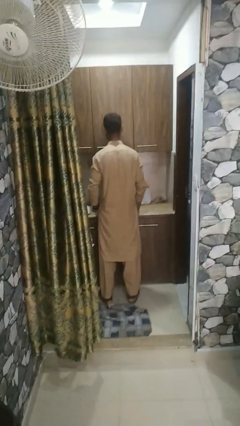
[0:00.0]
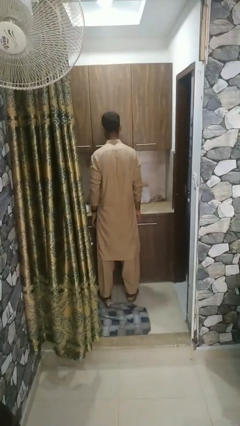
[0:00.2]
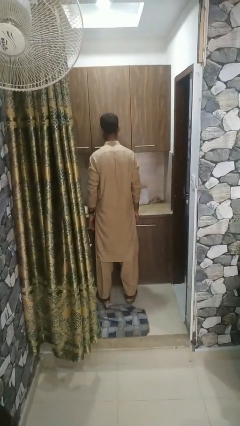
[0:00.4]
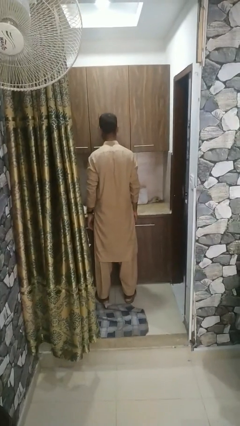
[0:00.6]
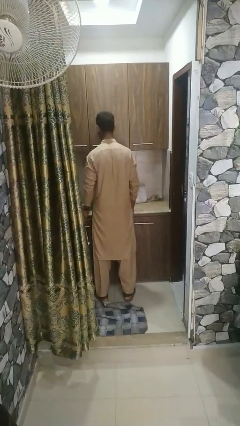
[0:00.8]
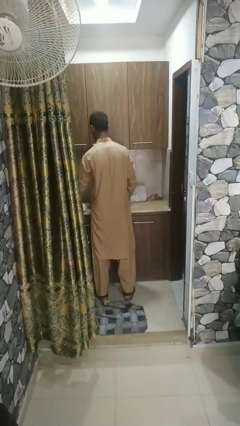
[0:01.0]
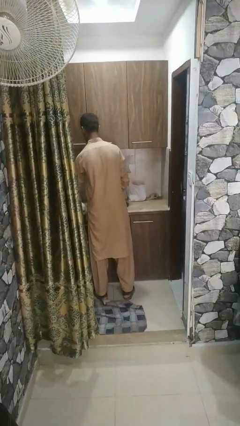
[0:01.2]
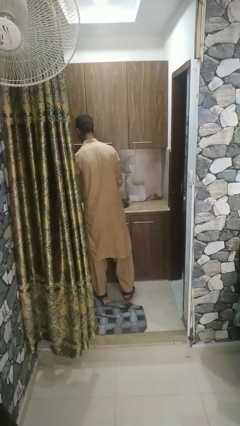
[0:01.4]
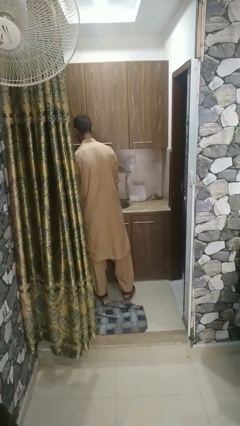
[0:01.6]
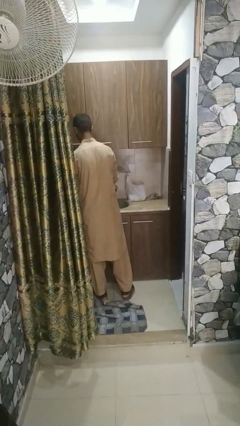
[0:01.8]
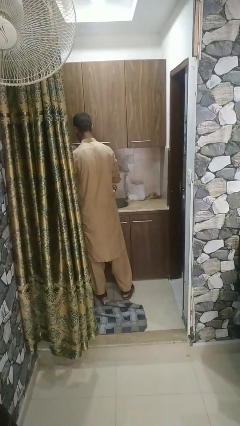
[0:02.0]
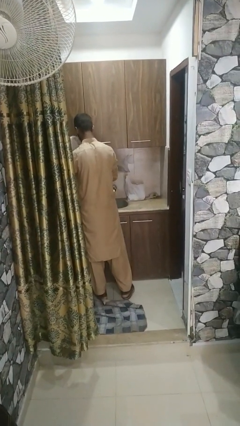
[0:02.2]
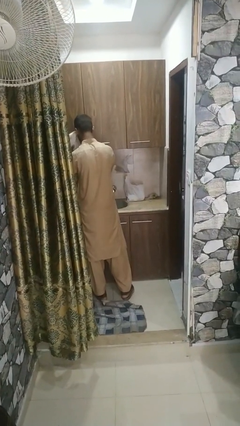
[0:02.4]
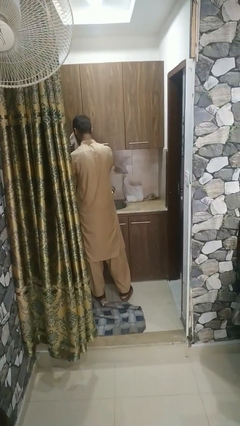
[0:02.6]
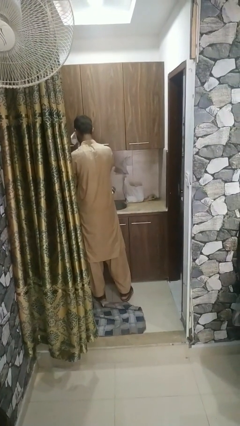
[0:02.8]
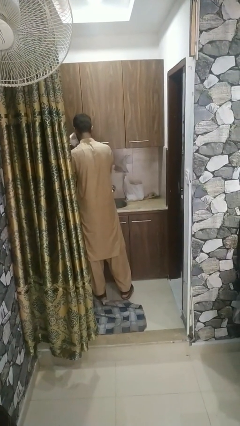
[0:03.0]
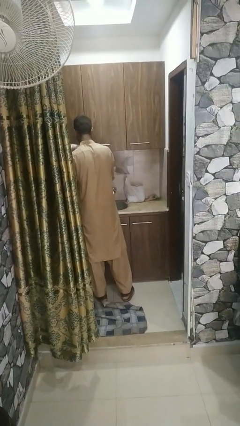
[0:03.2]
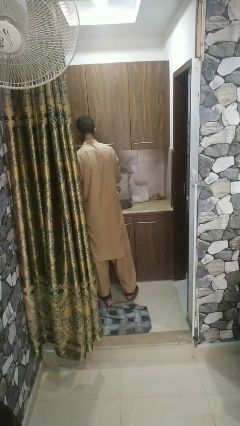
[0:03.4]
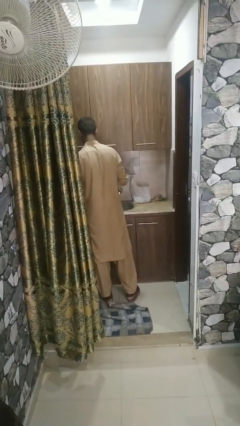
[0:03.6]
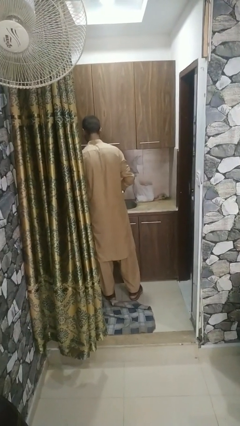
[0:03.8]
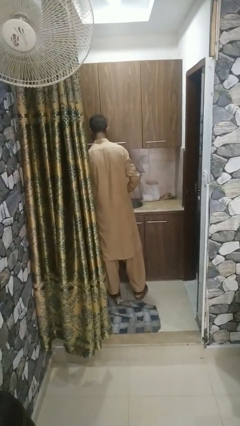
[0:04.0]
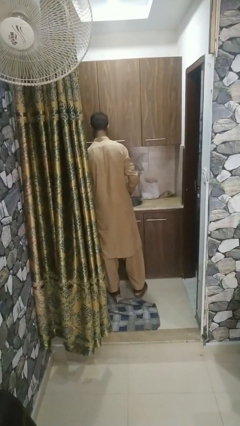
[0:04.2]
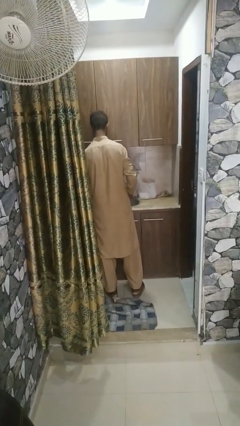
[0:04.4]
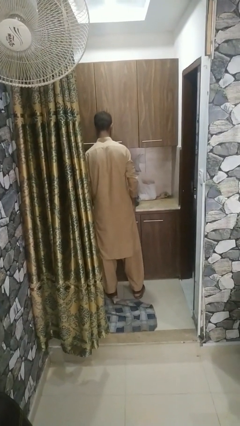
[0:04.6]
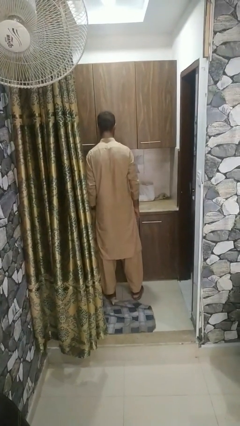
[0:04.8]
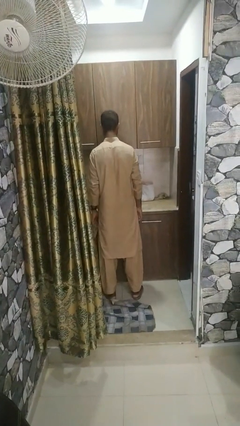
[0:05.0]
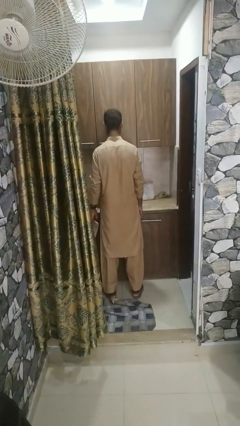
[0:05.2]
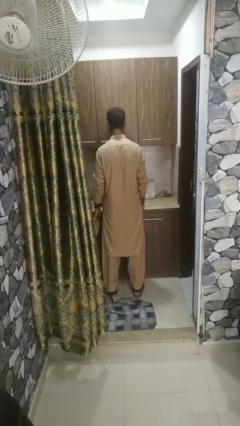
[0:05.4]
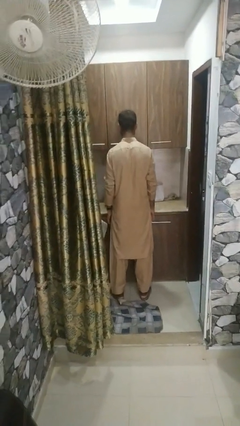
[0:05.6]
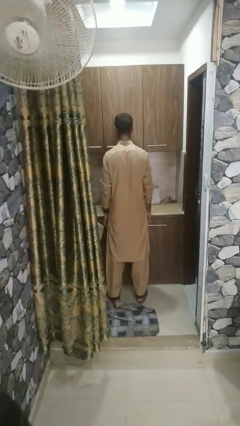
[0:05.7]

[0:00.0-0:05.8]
person dries face with towel

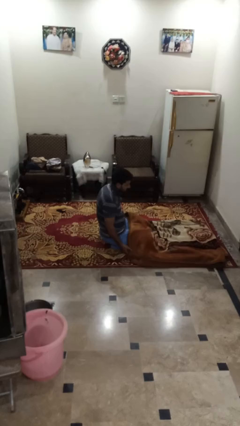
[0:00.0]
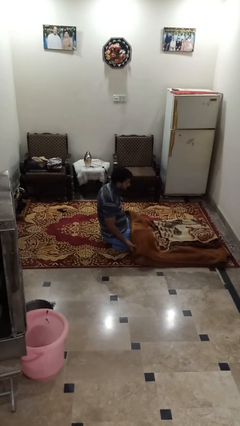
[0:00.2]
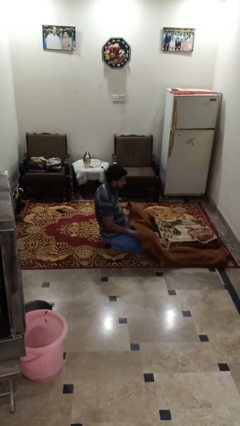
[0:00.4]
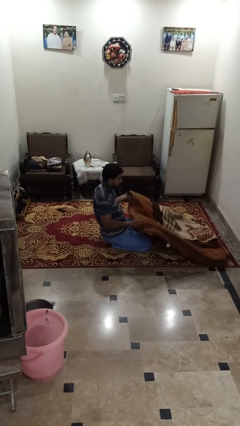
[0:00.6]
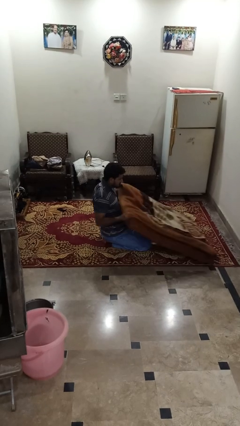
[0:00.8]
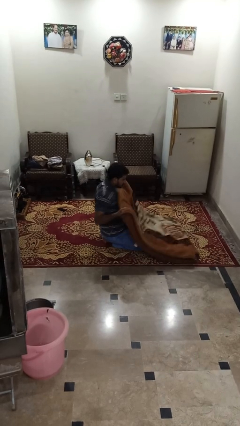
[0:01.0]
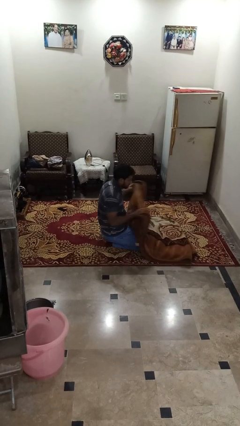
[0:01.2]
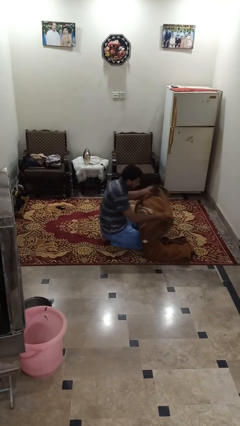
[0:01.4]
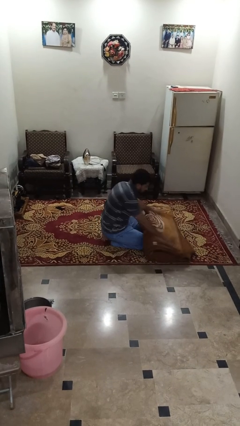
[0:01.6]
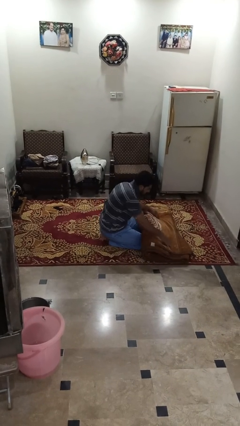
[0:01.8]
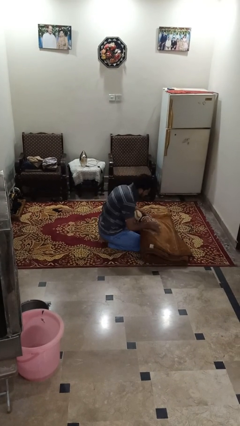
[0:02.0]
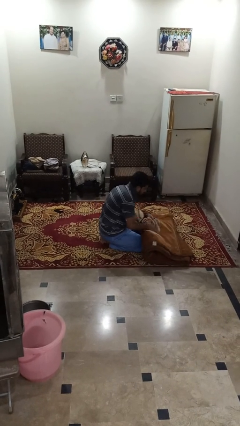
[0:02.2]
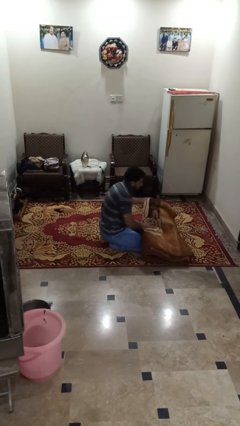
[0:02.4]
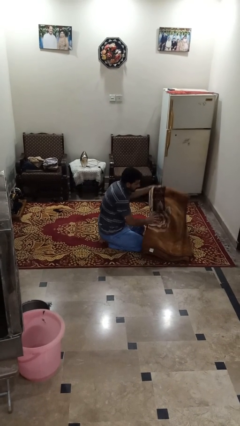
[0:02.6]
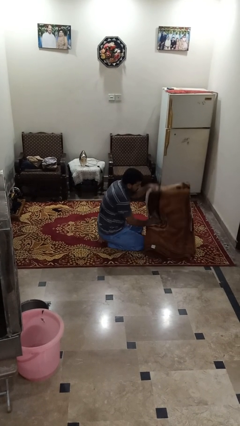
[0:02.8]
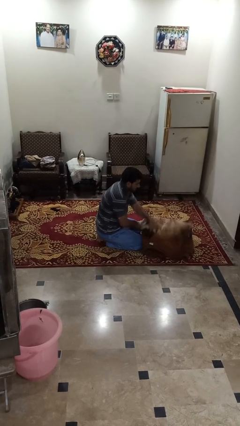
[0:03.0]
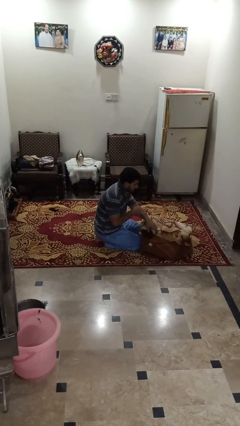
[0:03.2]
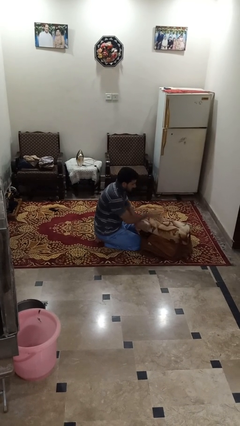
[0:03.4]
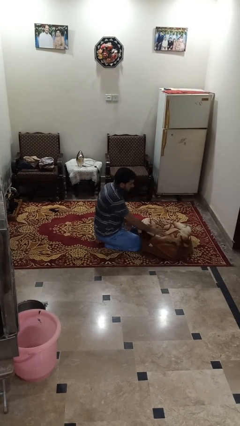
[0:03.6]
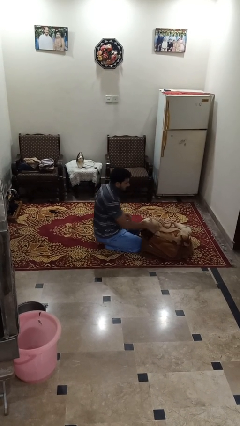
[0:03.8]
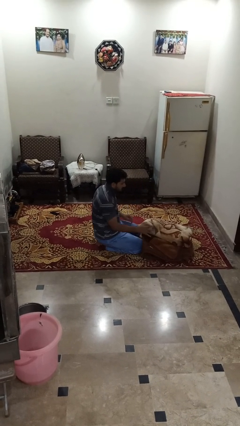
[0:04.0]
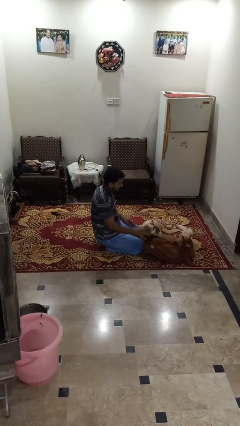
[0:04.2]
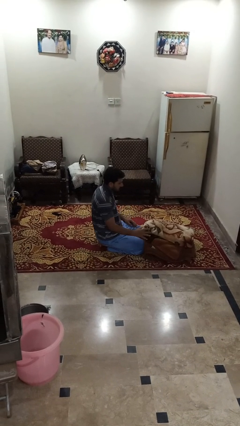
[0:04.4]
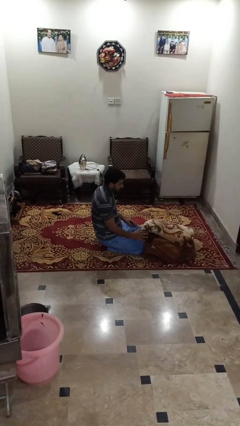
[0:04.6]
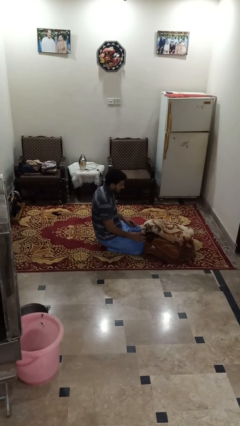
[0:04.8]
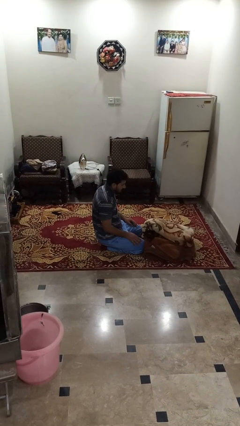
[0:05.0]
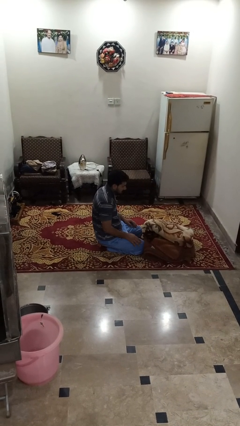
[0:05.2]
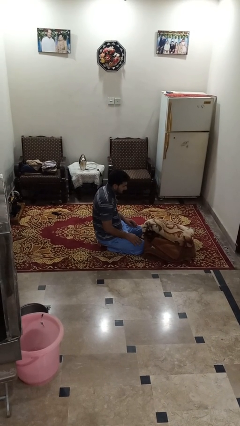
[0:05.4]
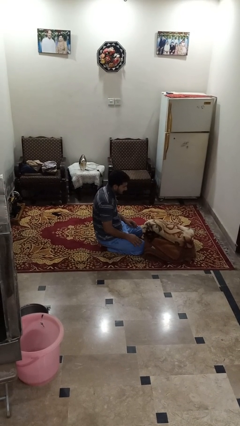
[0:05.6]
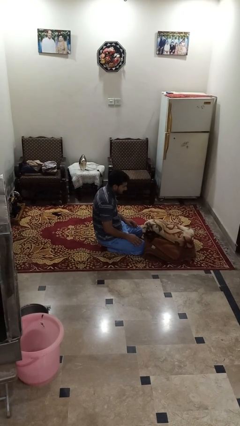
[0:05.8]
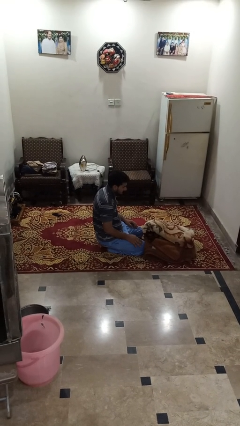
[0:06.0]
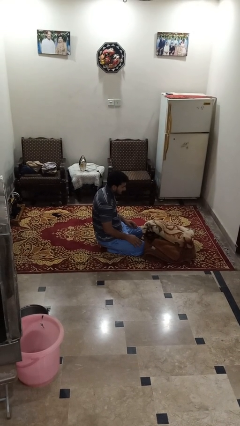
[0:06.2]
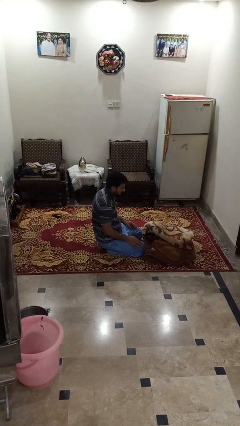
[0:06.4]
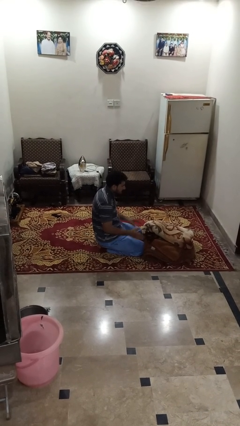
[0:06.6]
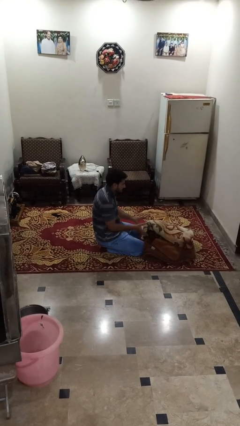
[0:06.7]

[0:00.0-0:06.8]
person folds blanket

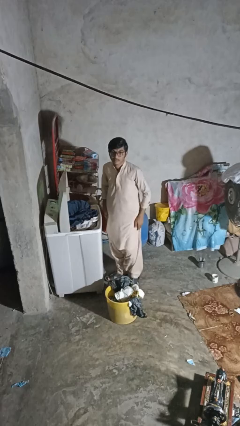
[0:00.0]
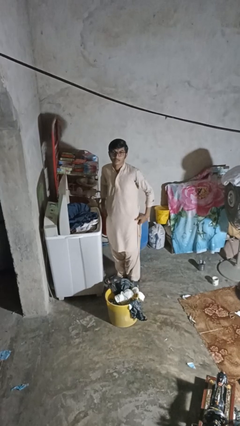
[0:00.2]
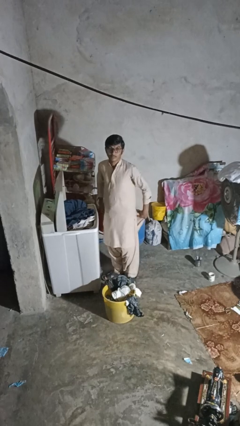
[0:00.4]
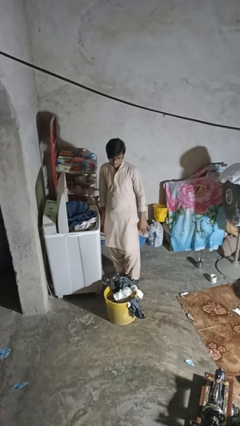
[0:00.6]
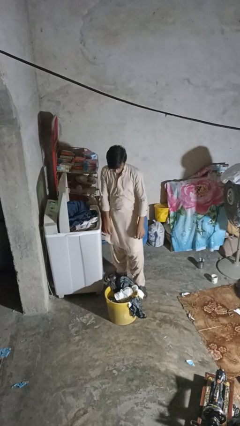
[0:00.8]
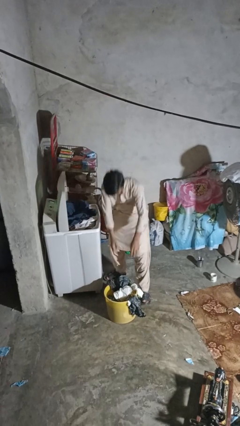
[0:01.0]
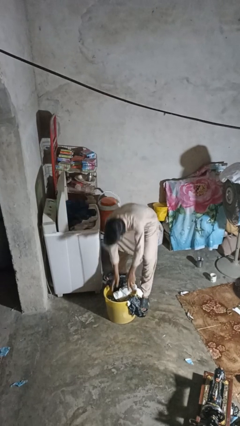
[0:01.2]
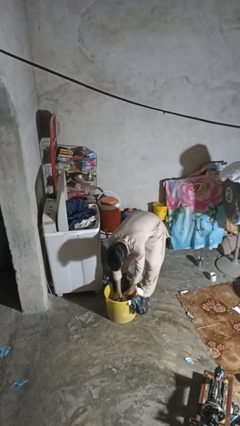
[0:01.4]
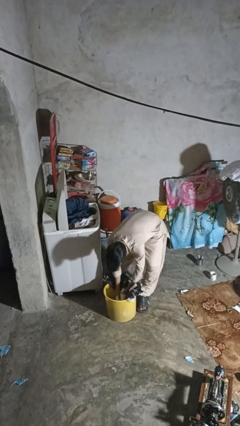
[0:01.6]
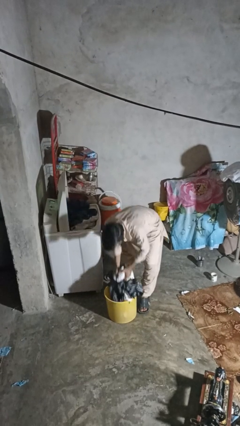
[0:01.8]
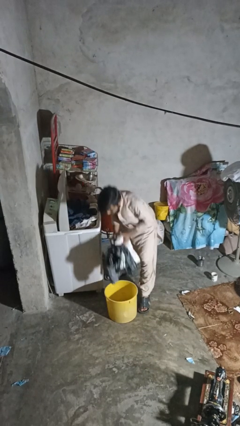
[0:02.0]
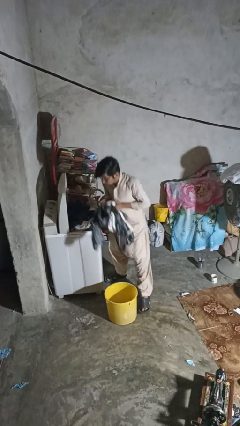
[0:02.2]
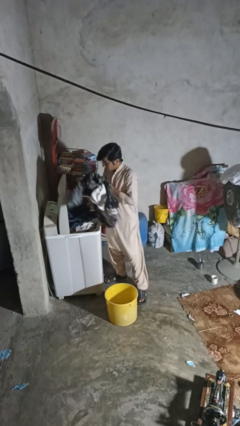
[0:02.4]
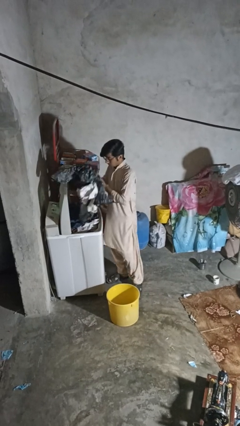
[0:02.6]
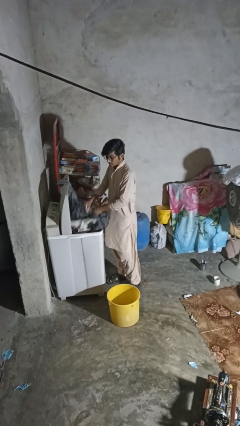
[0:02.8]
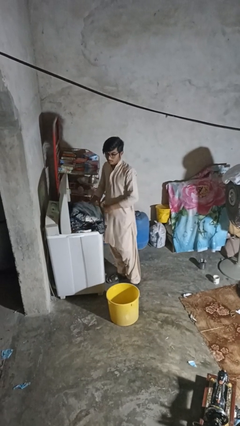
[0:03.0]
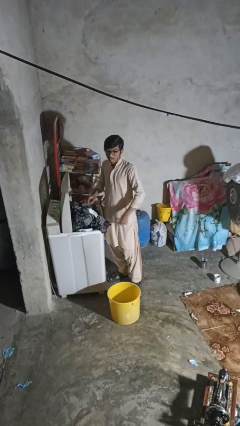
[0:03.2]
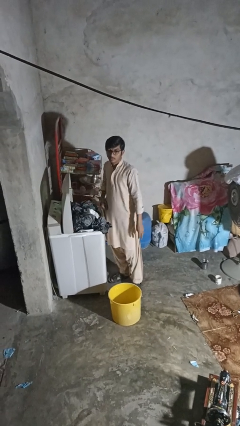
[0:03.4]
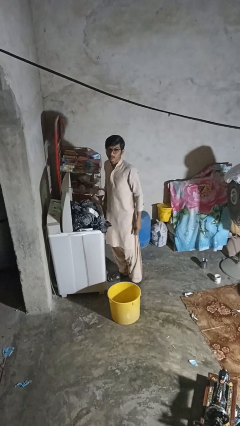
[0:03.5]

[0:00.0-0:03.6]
person loads clotheswasher

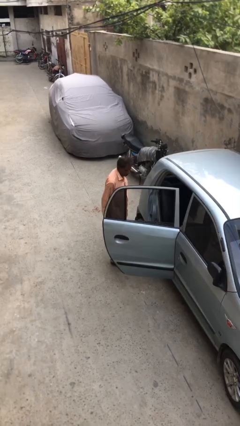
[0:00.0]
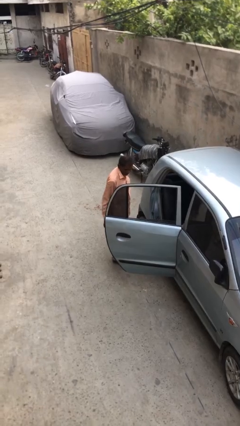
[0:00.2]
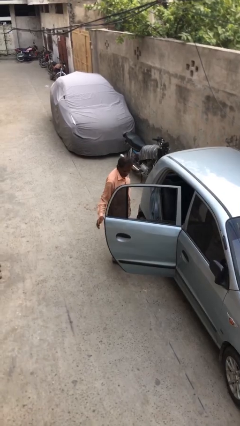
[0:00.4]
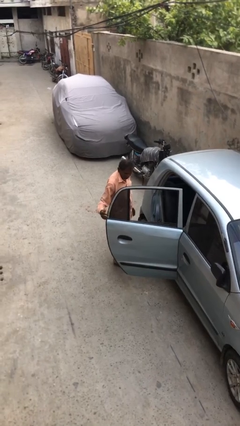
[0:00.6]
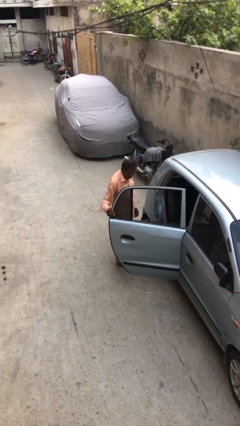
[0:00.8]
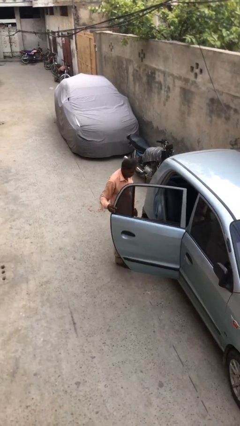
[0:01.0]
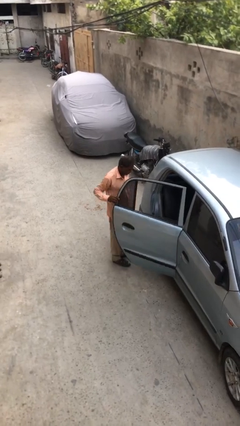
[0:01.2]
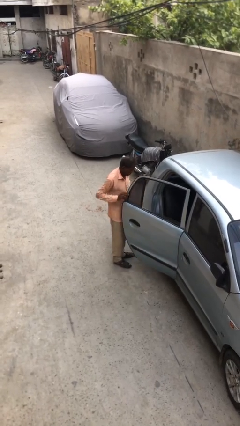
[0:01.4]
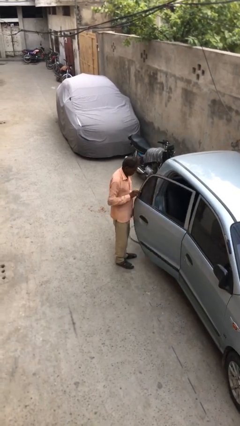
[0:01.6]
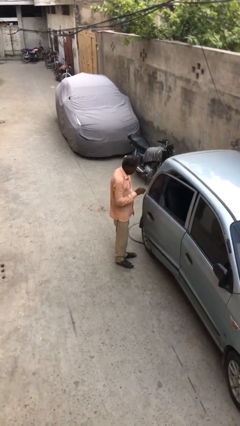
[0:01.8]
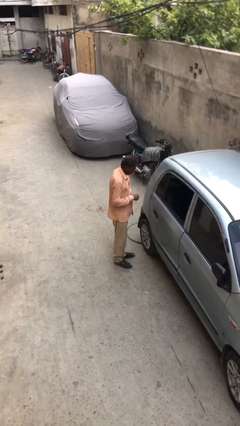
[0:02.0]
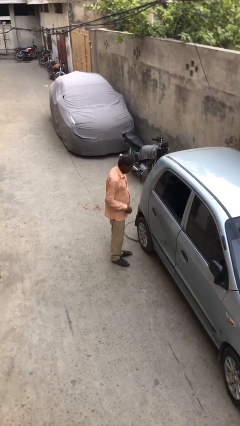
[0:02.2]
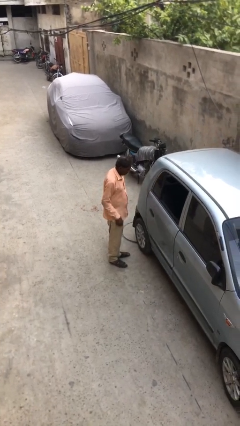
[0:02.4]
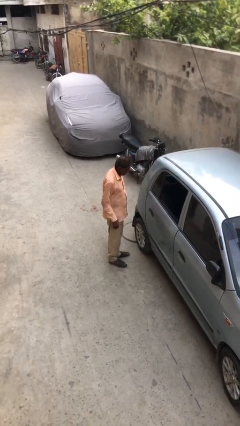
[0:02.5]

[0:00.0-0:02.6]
person closes car door
